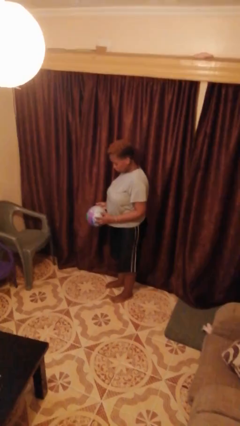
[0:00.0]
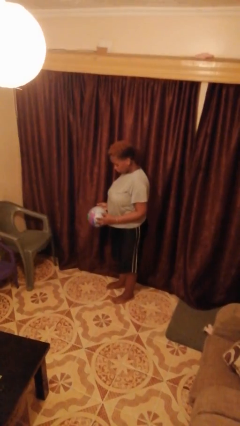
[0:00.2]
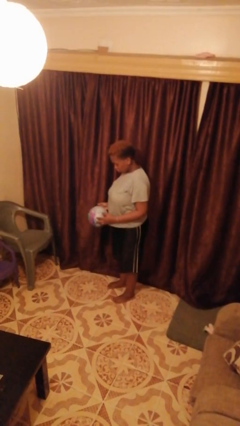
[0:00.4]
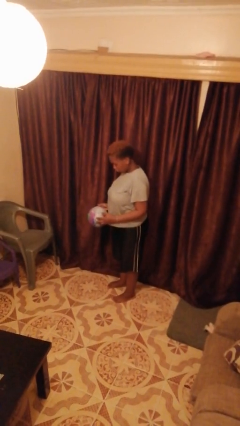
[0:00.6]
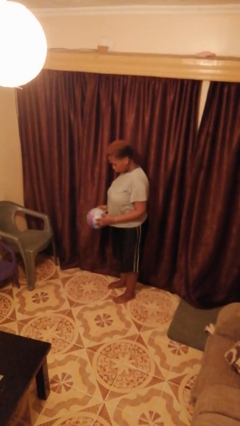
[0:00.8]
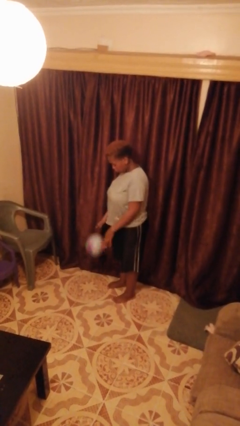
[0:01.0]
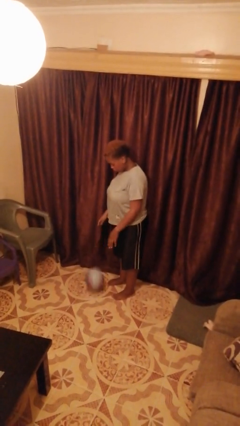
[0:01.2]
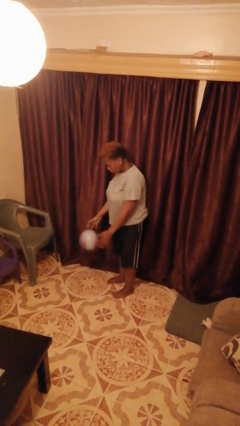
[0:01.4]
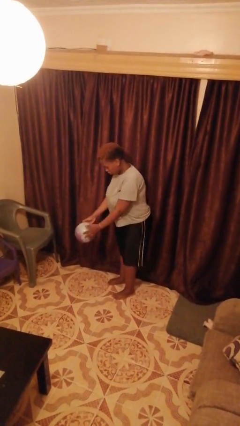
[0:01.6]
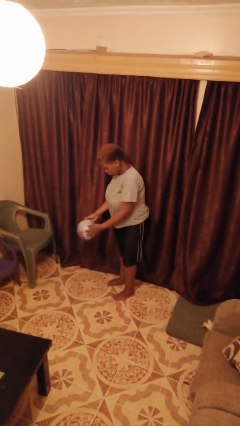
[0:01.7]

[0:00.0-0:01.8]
person bounces ball on floor

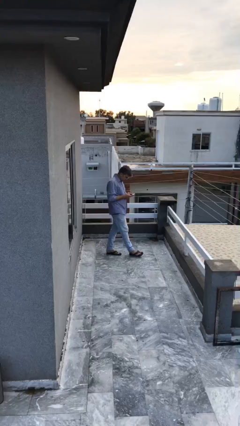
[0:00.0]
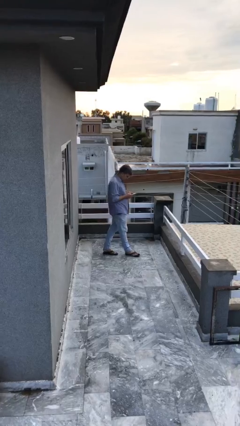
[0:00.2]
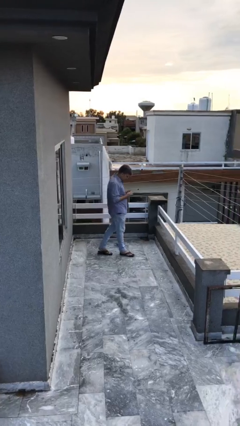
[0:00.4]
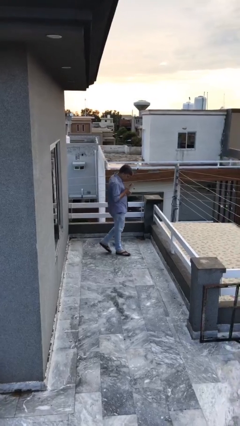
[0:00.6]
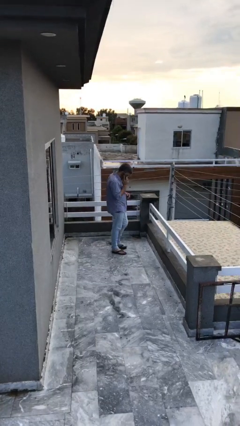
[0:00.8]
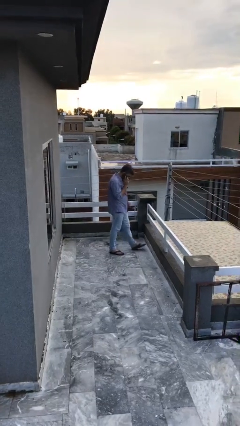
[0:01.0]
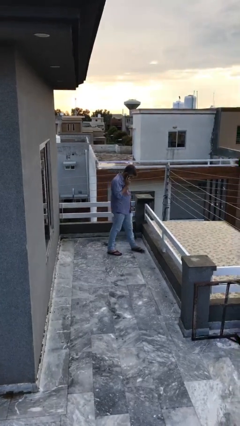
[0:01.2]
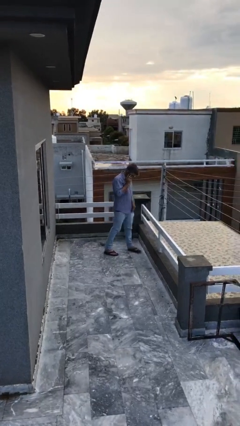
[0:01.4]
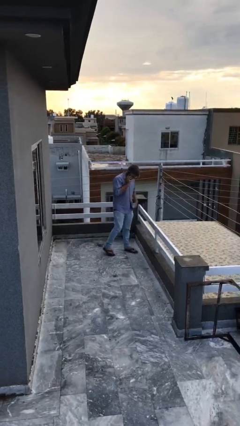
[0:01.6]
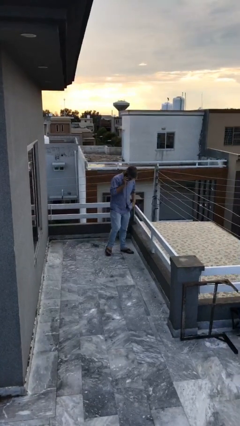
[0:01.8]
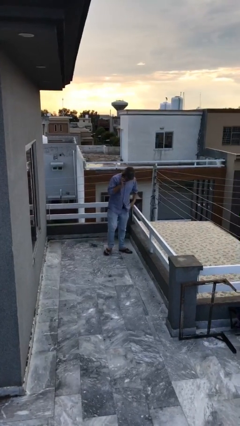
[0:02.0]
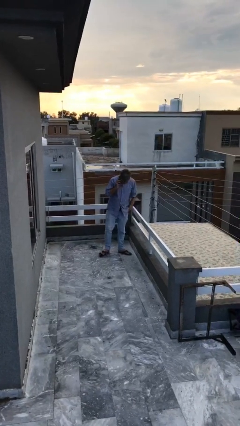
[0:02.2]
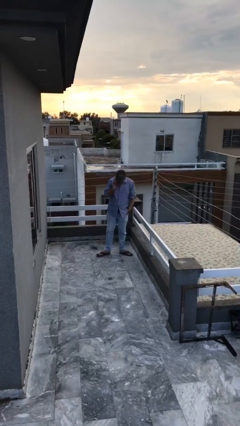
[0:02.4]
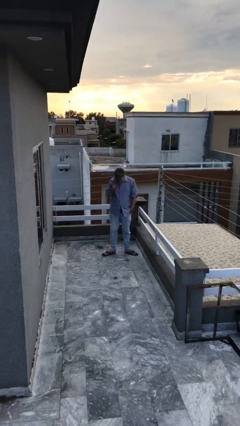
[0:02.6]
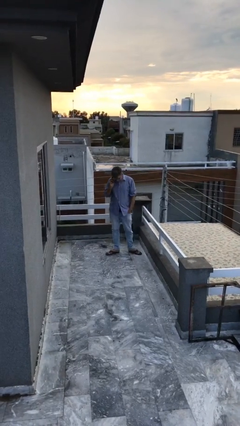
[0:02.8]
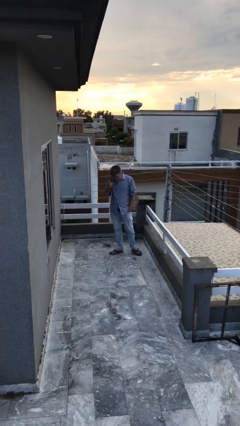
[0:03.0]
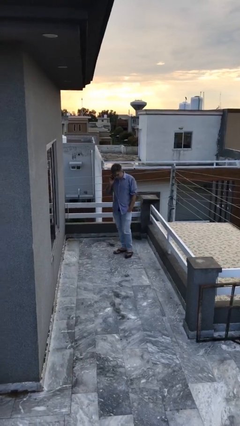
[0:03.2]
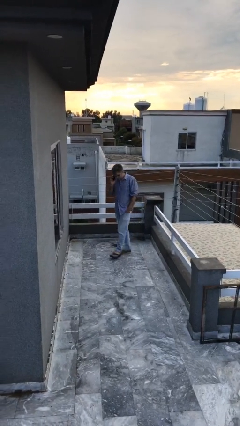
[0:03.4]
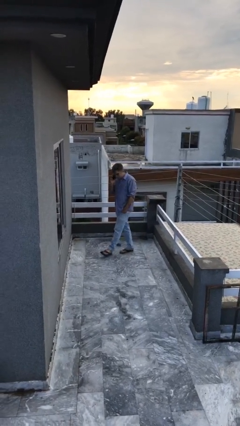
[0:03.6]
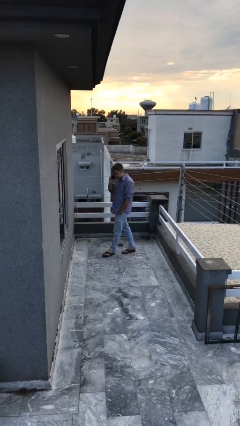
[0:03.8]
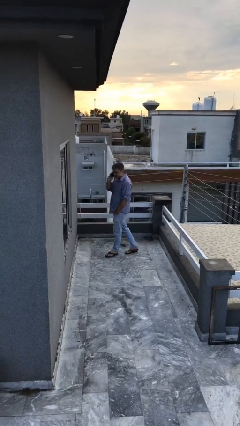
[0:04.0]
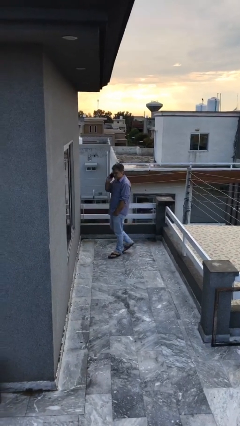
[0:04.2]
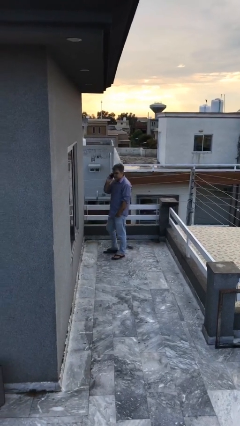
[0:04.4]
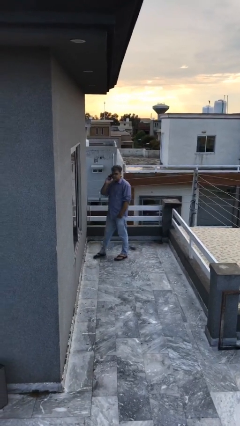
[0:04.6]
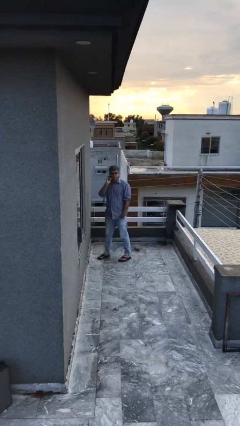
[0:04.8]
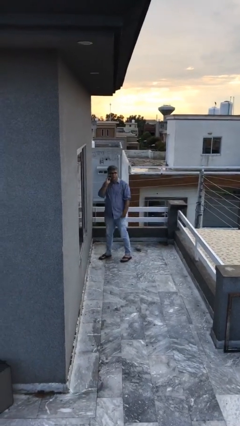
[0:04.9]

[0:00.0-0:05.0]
person talks on phone

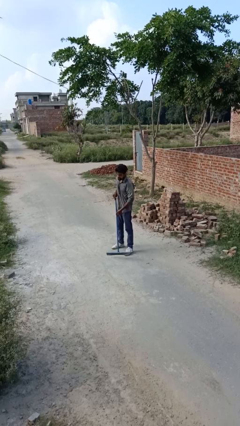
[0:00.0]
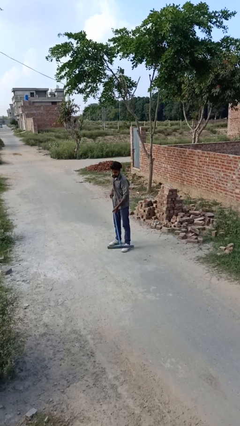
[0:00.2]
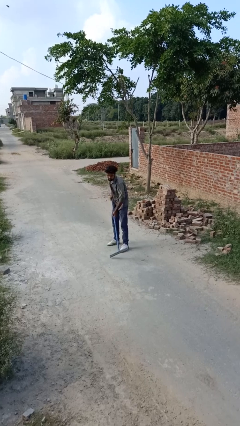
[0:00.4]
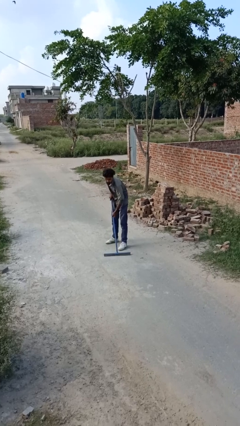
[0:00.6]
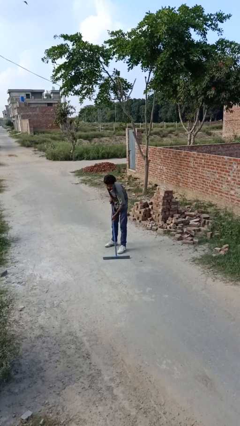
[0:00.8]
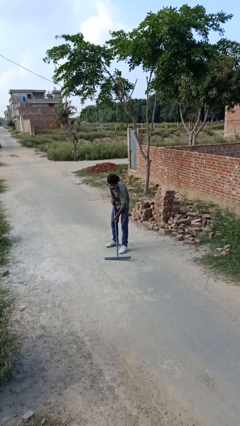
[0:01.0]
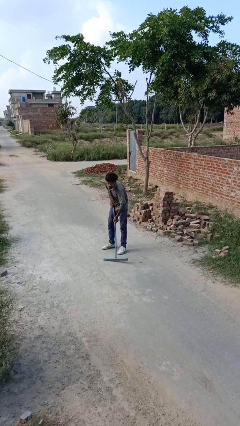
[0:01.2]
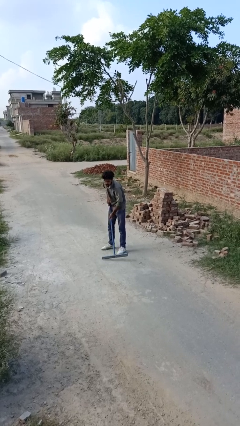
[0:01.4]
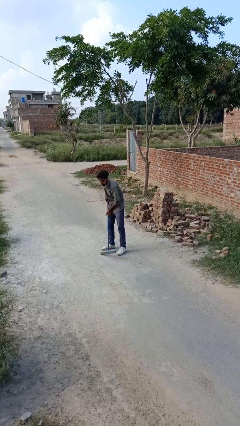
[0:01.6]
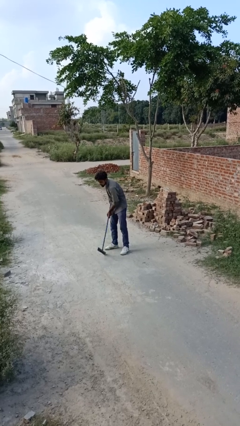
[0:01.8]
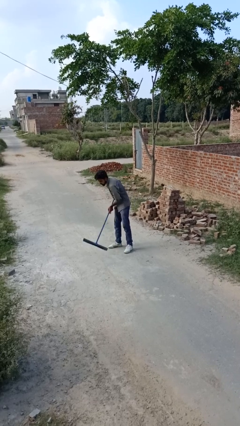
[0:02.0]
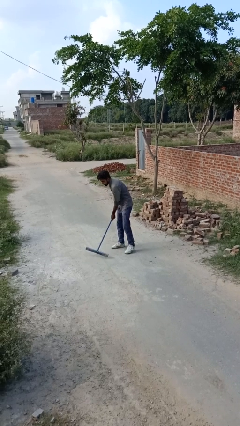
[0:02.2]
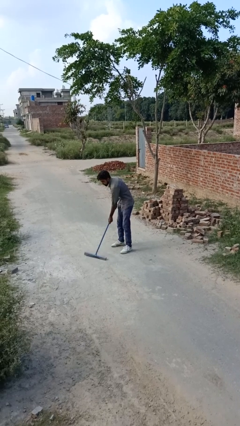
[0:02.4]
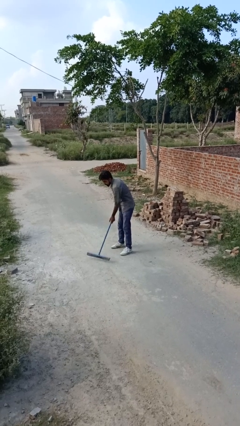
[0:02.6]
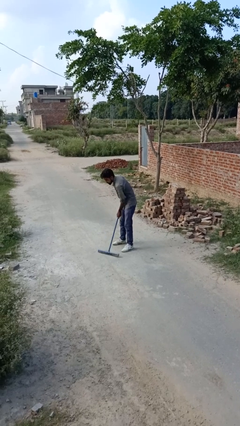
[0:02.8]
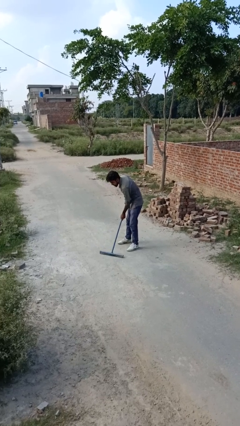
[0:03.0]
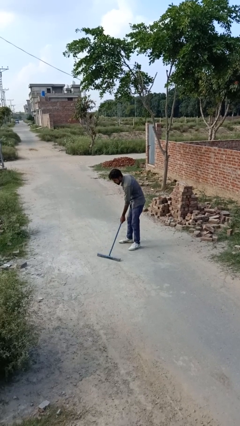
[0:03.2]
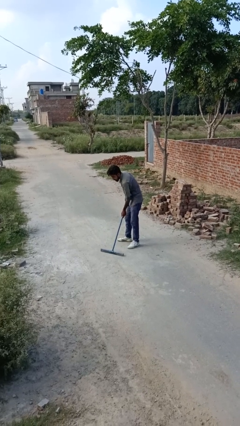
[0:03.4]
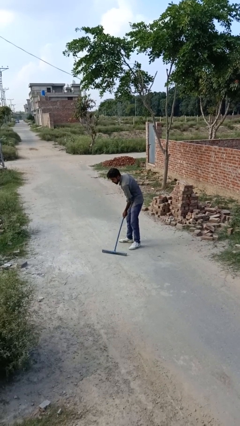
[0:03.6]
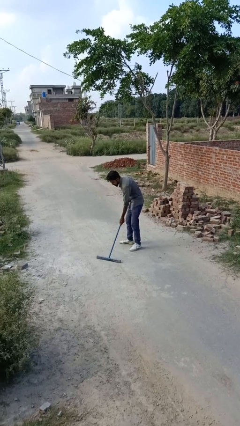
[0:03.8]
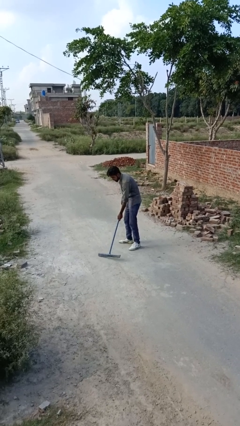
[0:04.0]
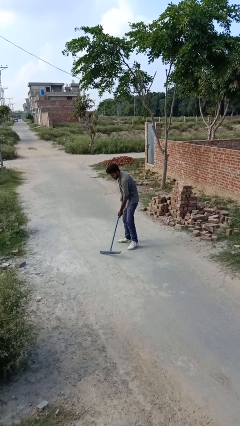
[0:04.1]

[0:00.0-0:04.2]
person sweeps floor

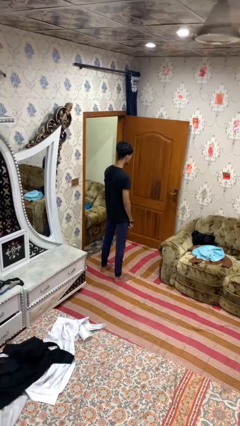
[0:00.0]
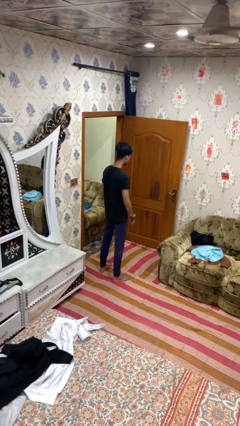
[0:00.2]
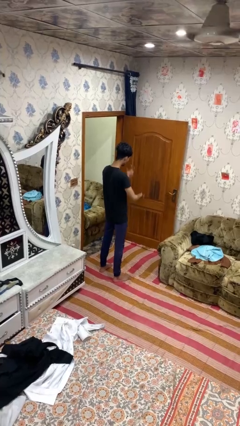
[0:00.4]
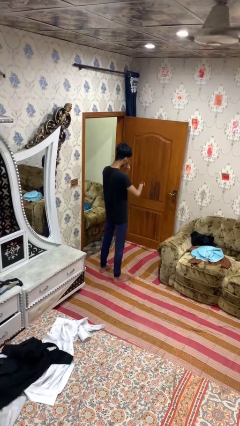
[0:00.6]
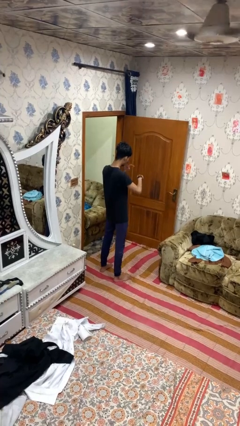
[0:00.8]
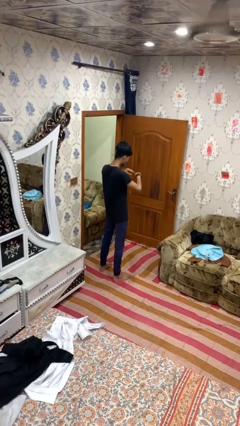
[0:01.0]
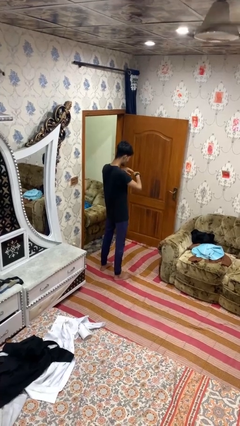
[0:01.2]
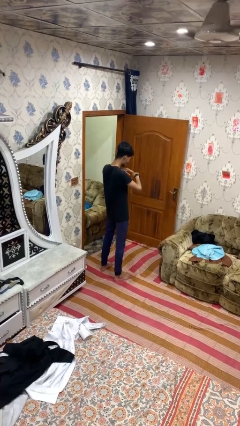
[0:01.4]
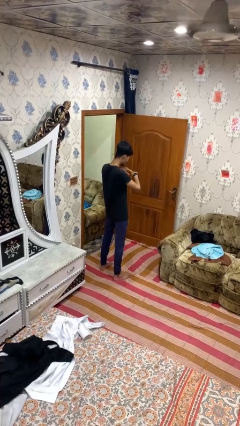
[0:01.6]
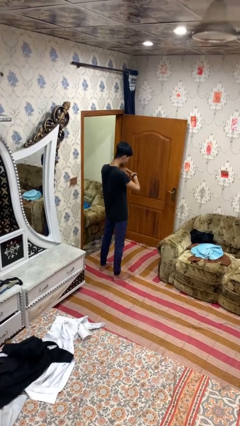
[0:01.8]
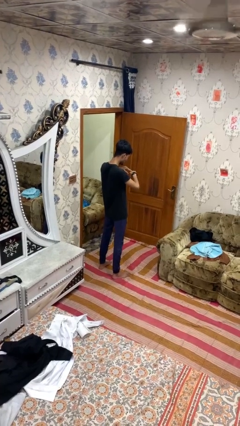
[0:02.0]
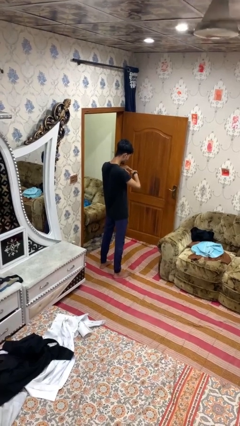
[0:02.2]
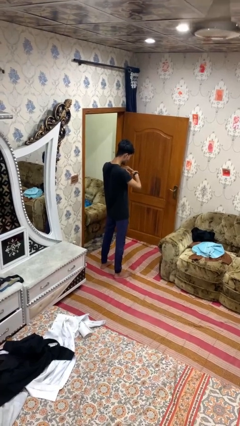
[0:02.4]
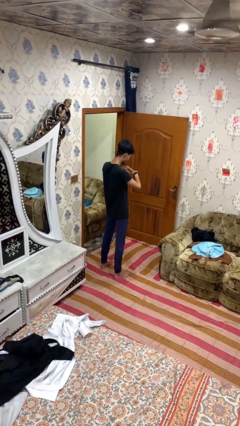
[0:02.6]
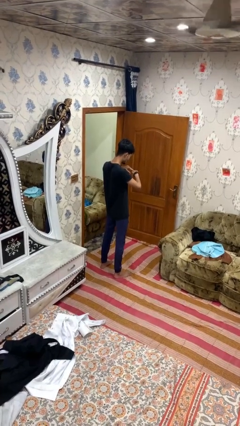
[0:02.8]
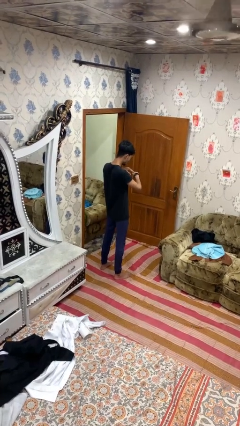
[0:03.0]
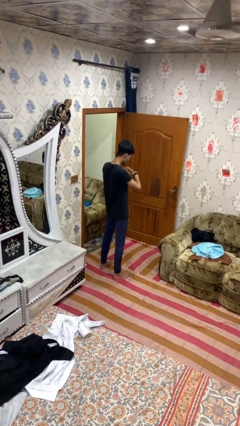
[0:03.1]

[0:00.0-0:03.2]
person gestures watch closely

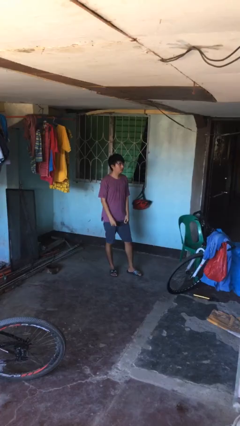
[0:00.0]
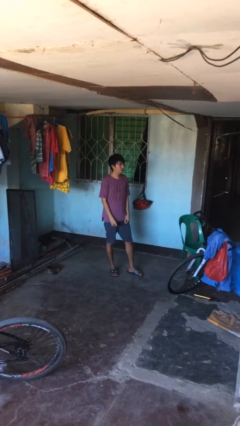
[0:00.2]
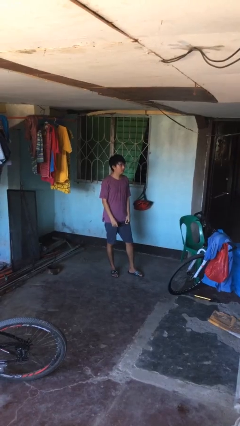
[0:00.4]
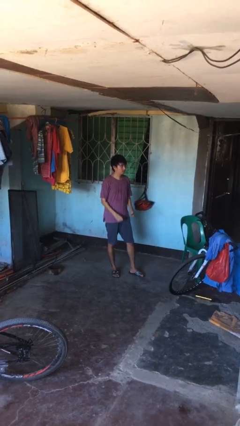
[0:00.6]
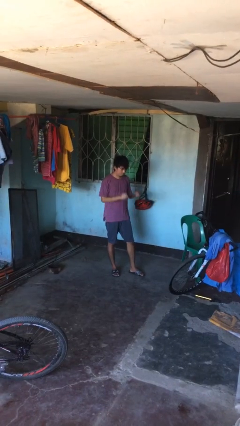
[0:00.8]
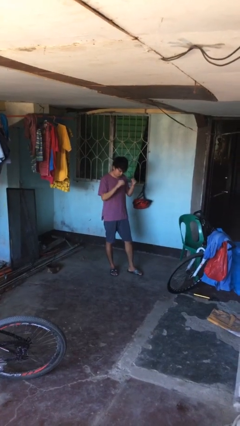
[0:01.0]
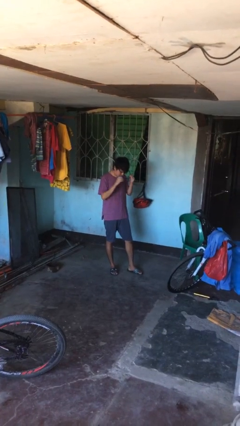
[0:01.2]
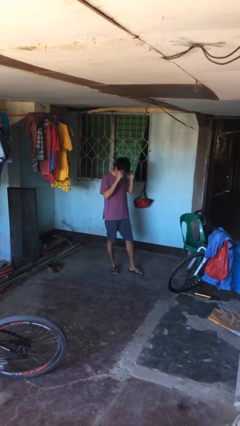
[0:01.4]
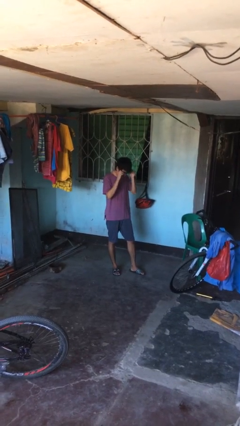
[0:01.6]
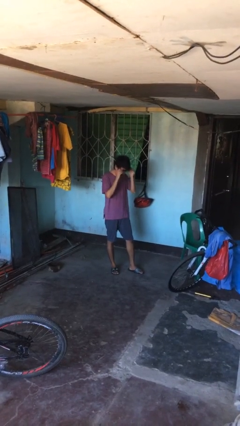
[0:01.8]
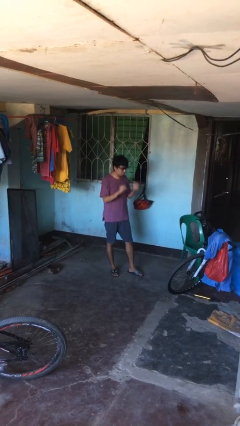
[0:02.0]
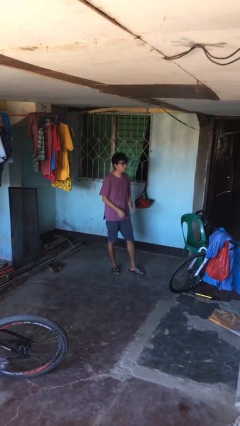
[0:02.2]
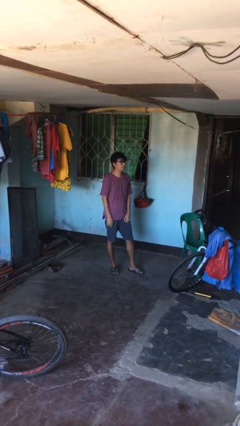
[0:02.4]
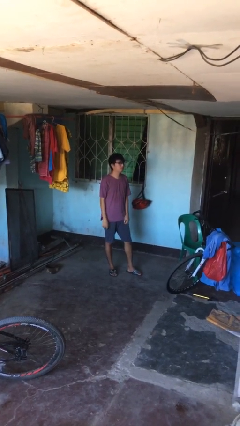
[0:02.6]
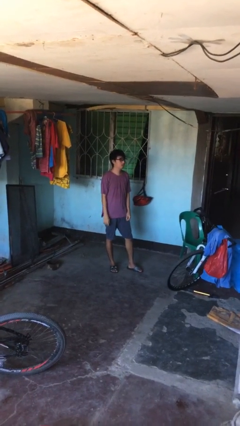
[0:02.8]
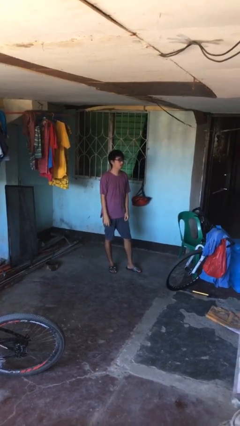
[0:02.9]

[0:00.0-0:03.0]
person puts on glasses

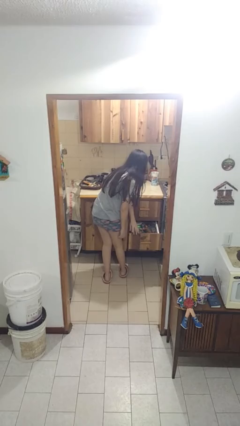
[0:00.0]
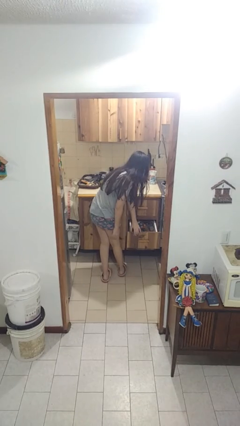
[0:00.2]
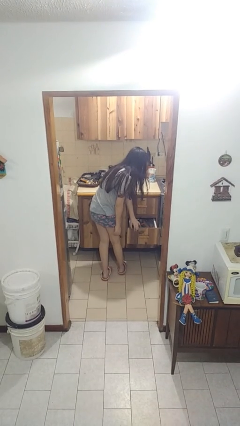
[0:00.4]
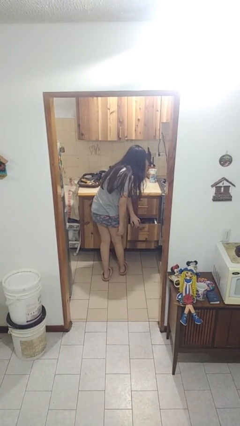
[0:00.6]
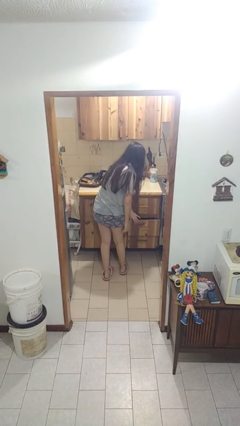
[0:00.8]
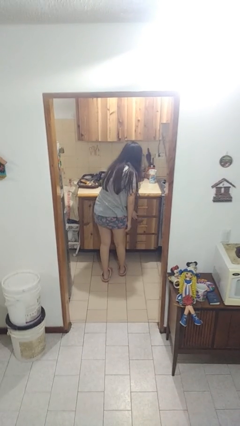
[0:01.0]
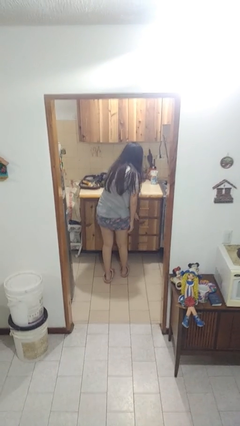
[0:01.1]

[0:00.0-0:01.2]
person closes kitchen drawer
